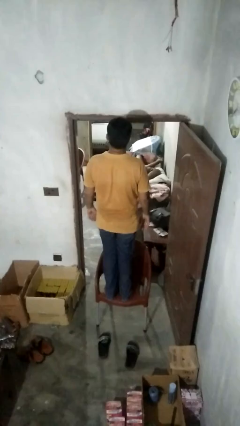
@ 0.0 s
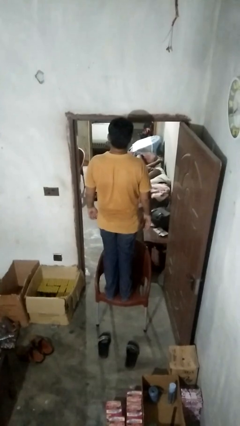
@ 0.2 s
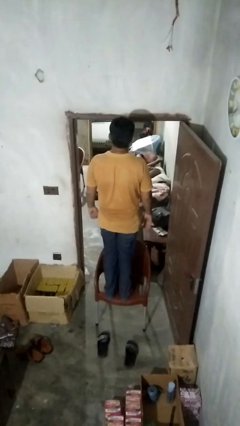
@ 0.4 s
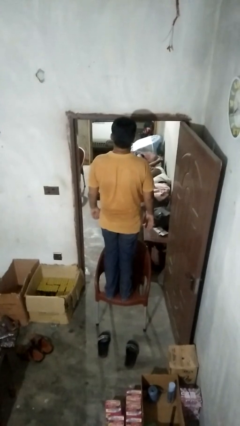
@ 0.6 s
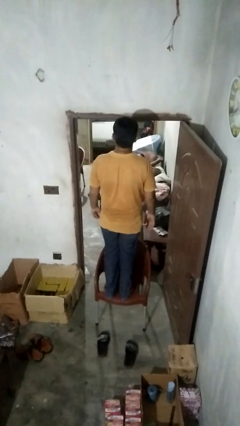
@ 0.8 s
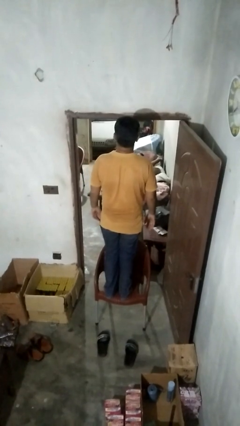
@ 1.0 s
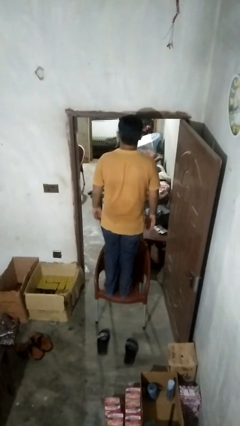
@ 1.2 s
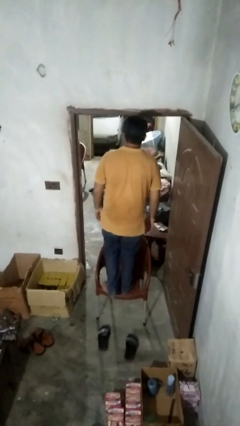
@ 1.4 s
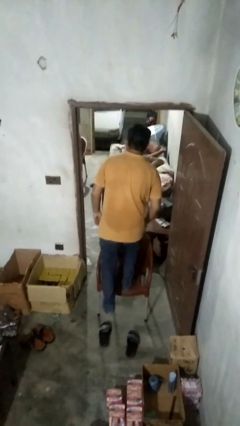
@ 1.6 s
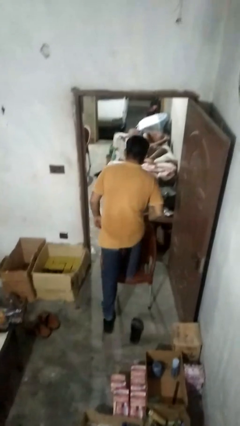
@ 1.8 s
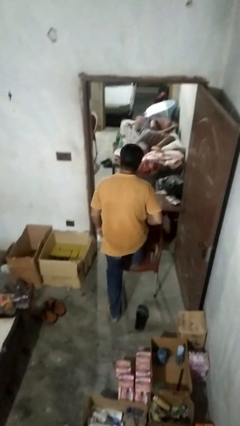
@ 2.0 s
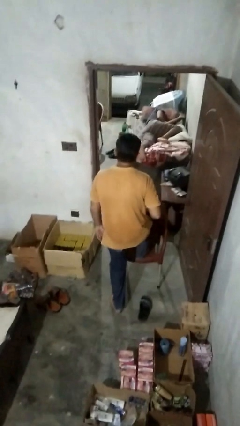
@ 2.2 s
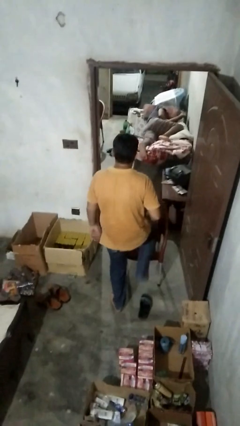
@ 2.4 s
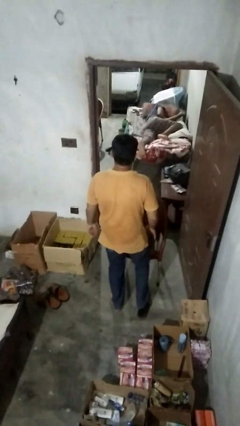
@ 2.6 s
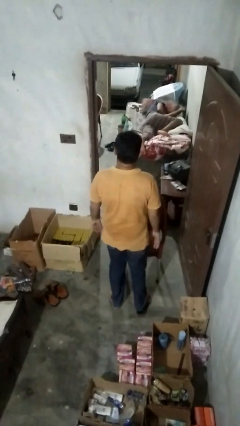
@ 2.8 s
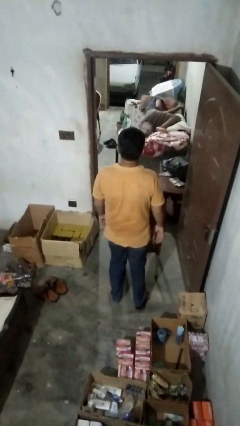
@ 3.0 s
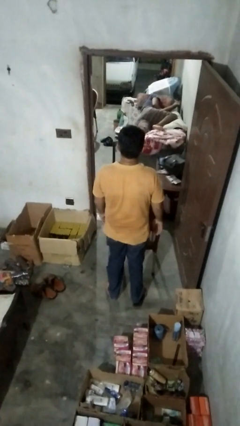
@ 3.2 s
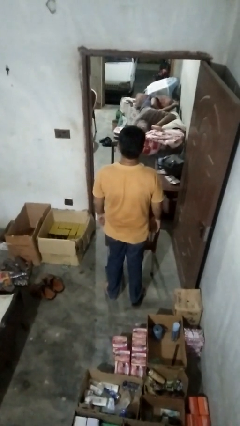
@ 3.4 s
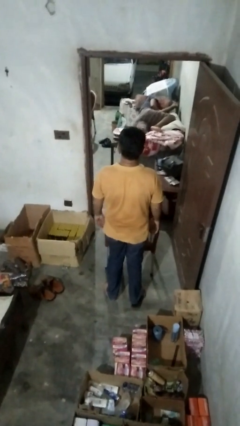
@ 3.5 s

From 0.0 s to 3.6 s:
person climbs off chair

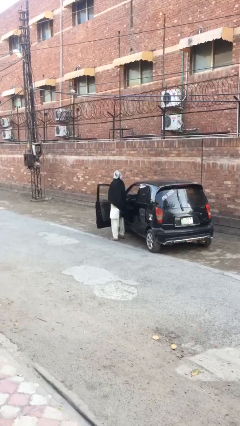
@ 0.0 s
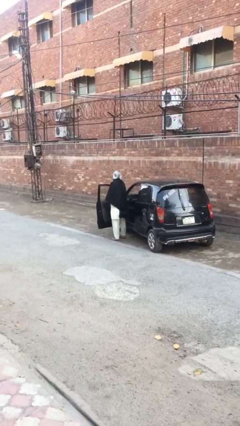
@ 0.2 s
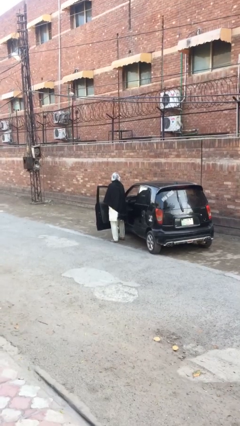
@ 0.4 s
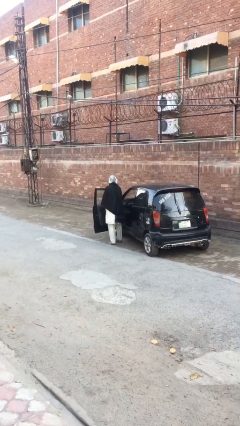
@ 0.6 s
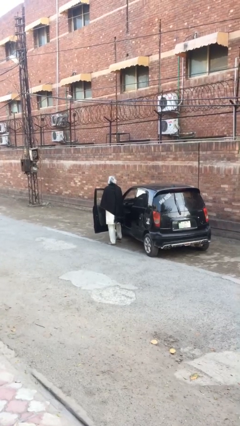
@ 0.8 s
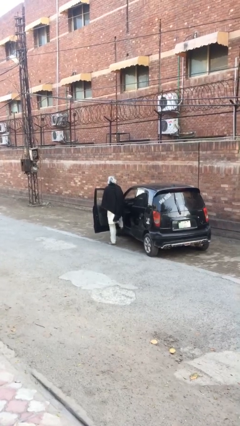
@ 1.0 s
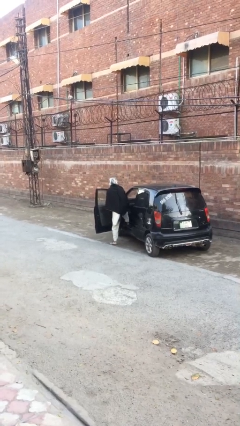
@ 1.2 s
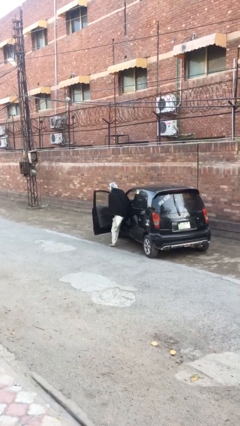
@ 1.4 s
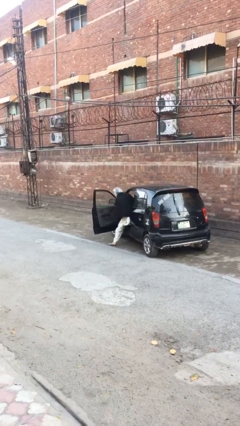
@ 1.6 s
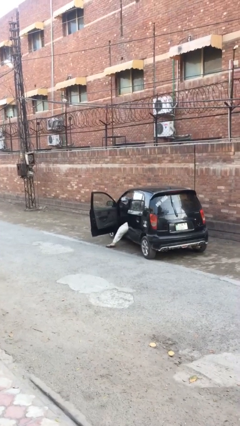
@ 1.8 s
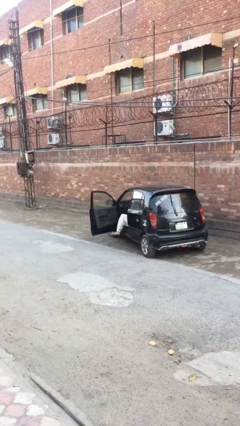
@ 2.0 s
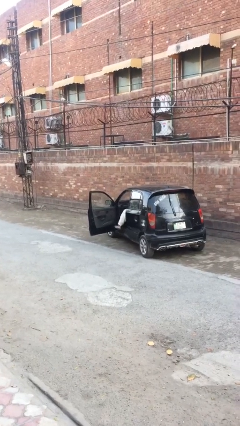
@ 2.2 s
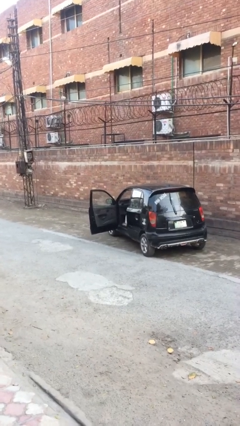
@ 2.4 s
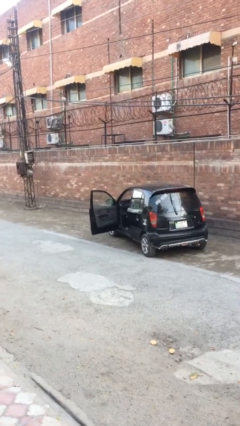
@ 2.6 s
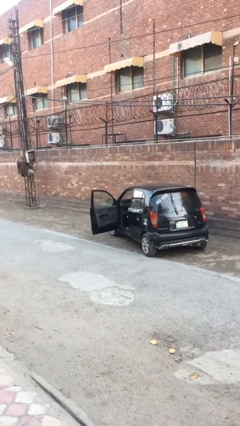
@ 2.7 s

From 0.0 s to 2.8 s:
person enters car

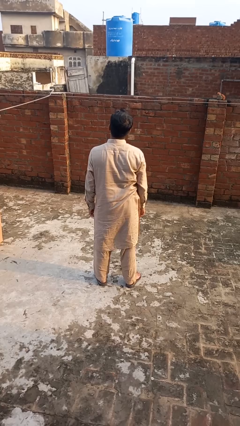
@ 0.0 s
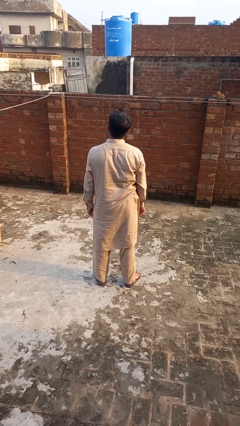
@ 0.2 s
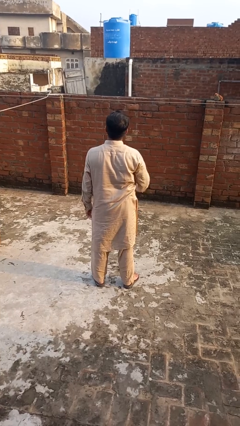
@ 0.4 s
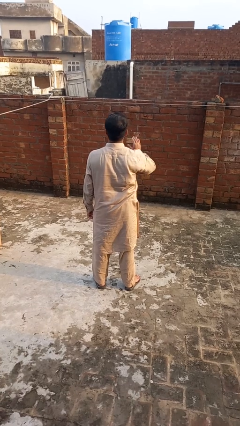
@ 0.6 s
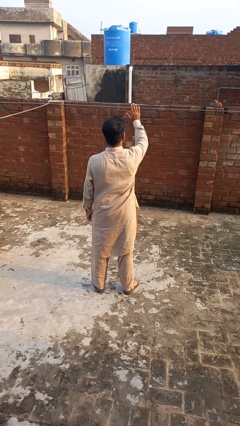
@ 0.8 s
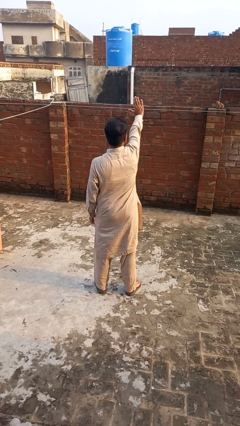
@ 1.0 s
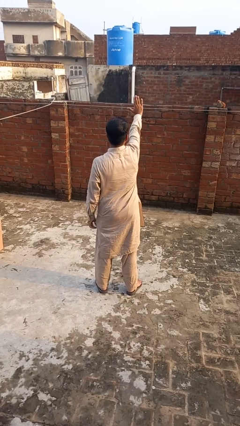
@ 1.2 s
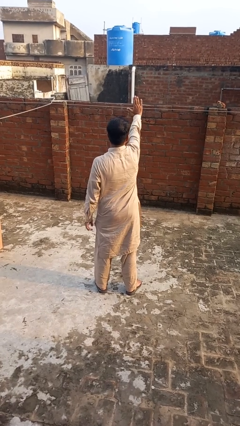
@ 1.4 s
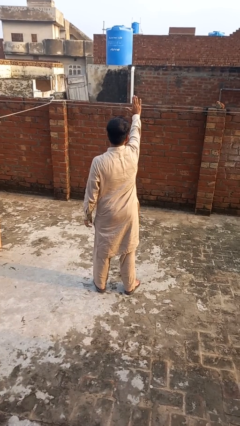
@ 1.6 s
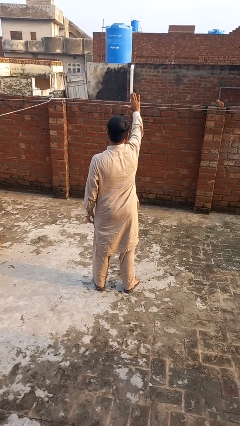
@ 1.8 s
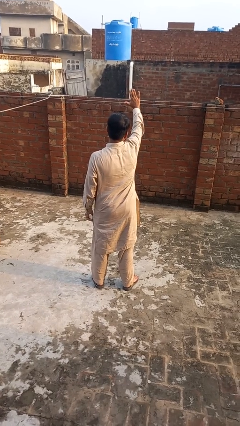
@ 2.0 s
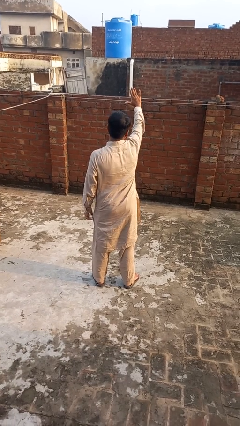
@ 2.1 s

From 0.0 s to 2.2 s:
person gestures stop

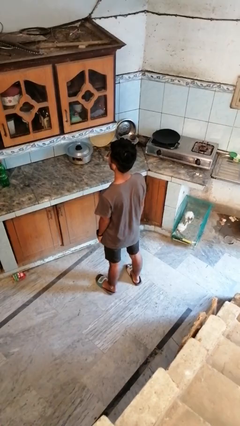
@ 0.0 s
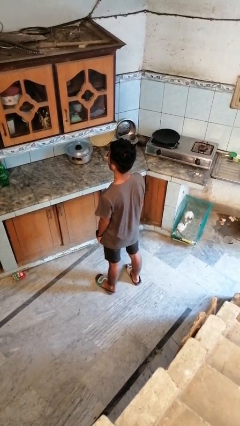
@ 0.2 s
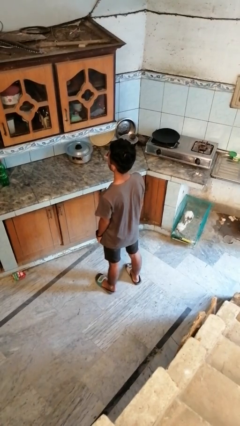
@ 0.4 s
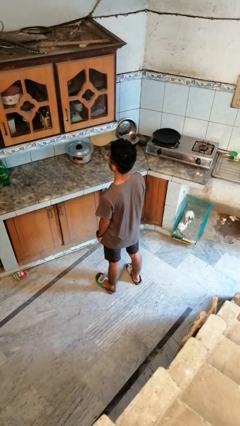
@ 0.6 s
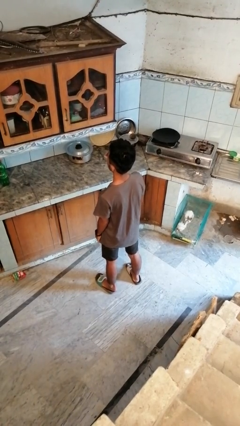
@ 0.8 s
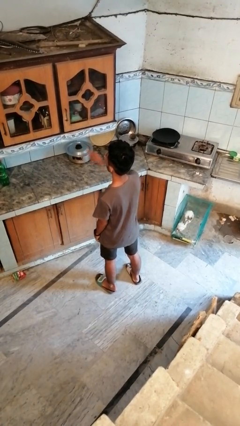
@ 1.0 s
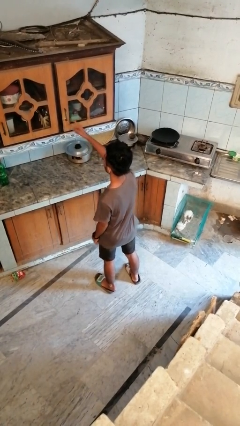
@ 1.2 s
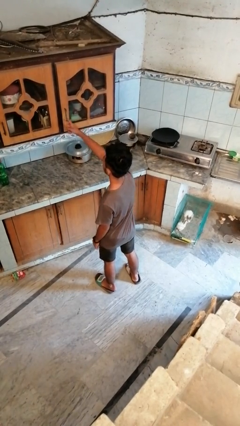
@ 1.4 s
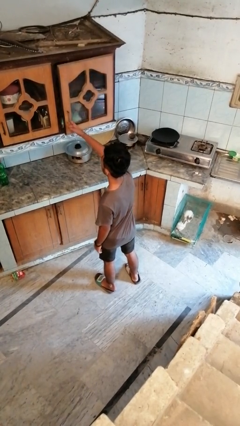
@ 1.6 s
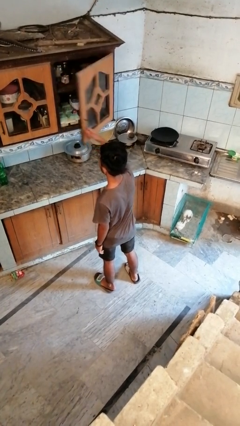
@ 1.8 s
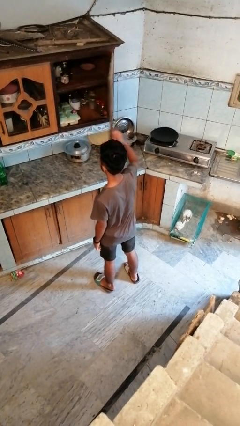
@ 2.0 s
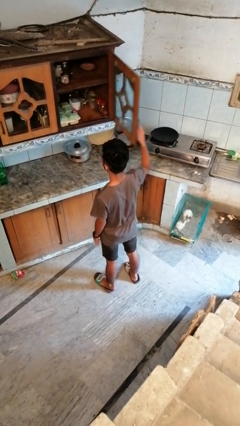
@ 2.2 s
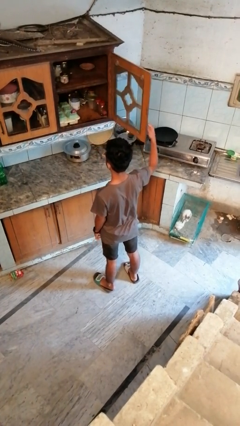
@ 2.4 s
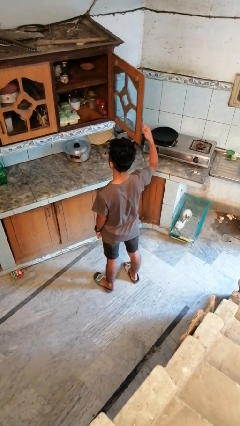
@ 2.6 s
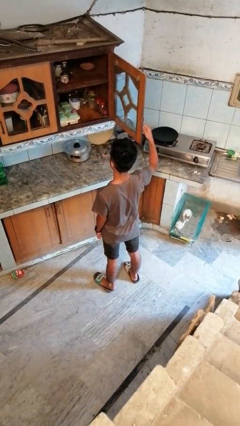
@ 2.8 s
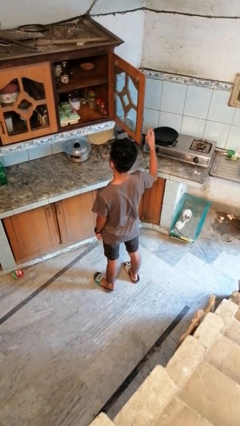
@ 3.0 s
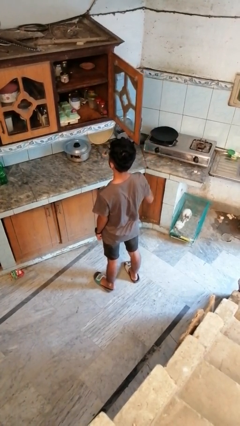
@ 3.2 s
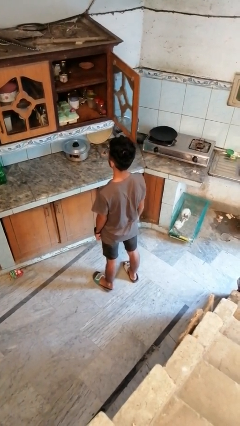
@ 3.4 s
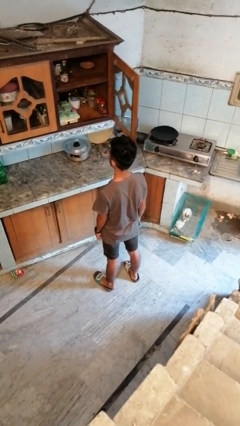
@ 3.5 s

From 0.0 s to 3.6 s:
person opens cabinet

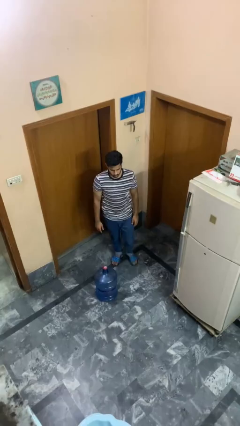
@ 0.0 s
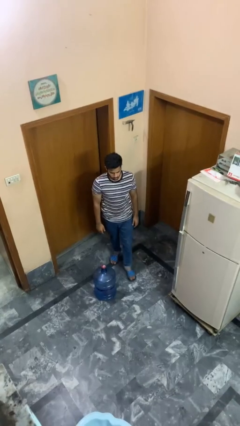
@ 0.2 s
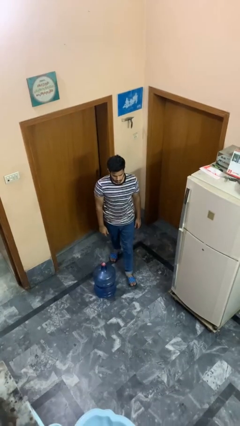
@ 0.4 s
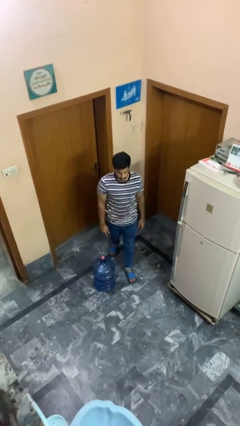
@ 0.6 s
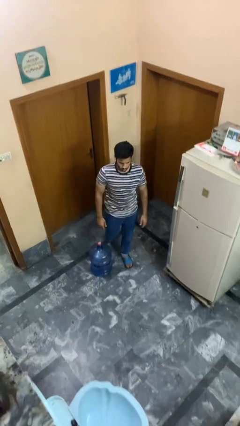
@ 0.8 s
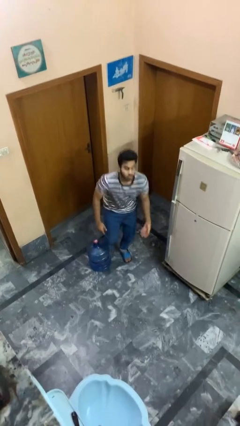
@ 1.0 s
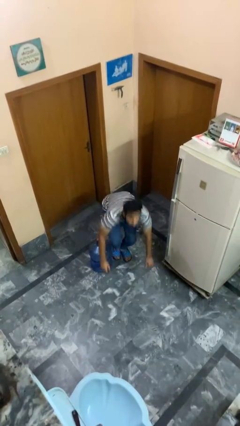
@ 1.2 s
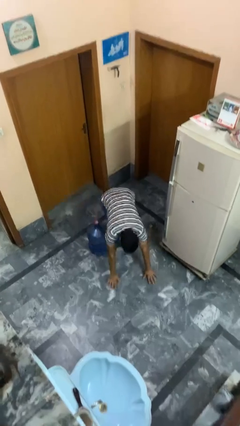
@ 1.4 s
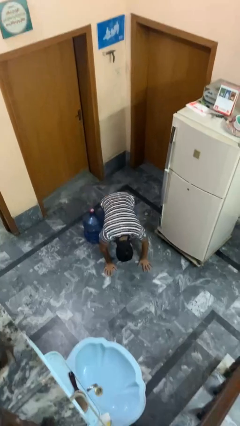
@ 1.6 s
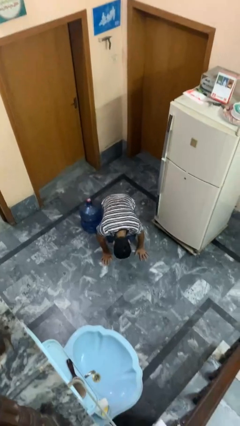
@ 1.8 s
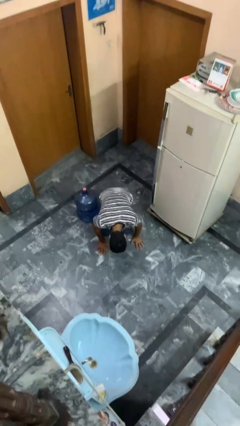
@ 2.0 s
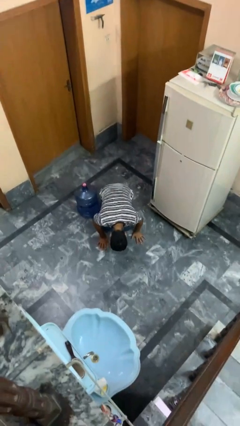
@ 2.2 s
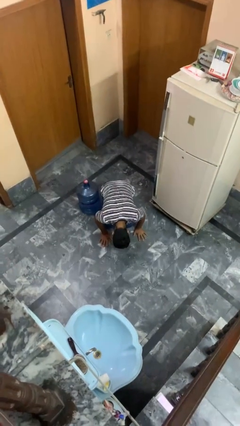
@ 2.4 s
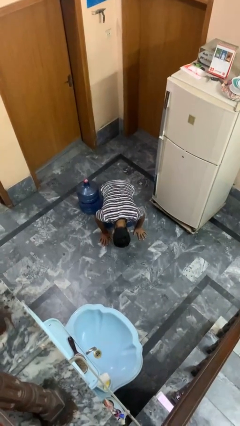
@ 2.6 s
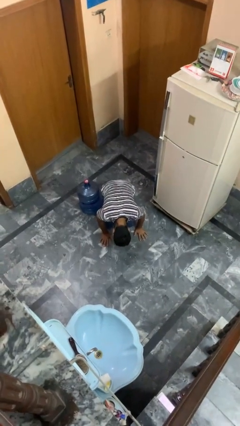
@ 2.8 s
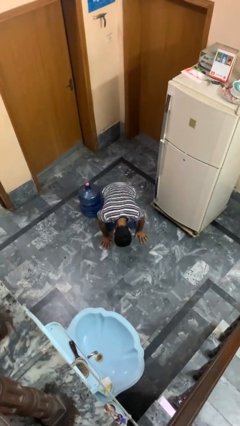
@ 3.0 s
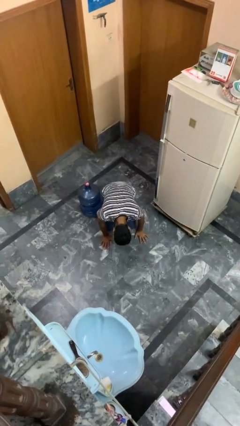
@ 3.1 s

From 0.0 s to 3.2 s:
person trips on object on floor

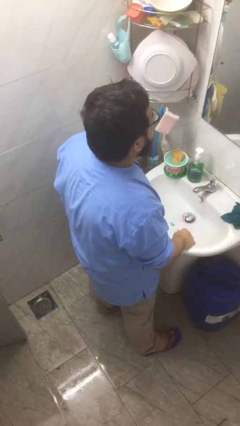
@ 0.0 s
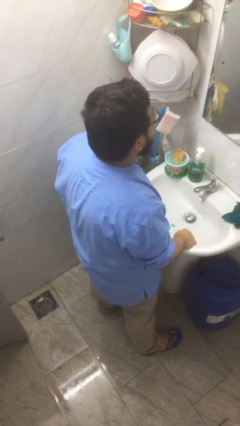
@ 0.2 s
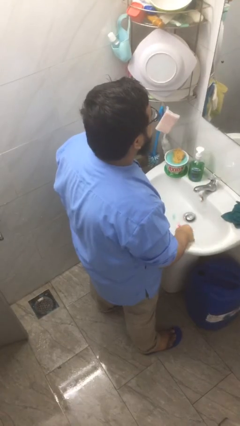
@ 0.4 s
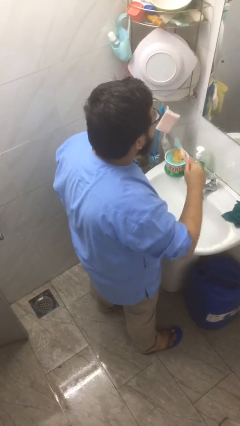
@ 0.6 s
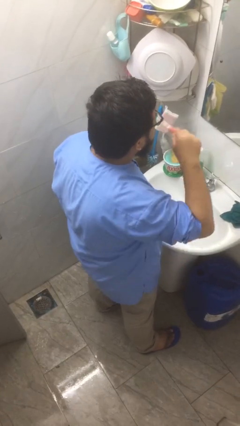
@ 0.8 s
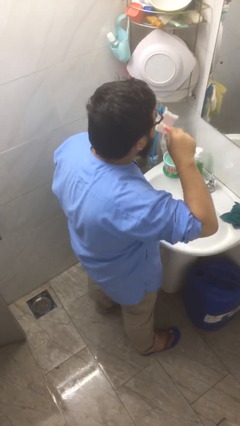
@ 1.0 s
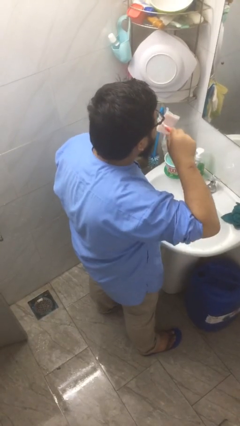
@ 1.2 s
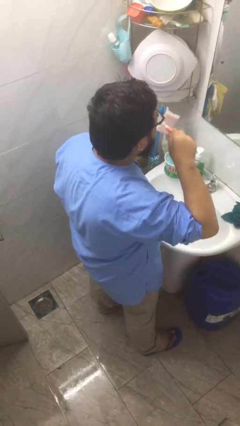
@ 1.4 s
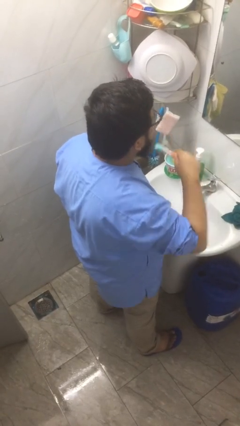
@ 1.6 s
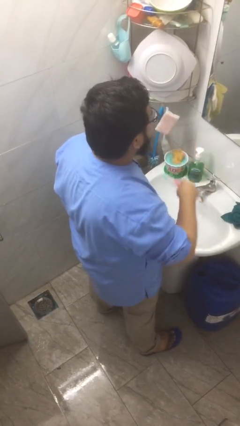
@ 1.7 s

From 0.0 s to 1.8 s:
person brushes teeth

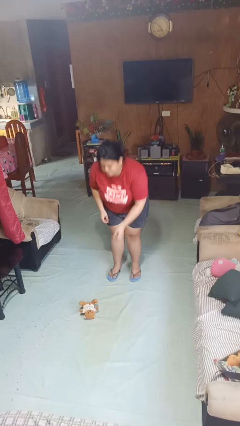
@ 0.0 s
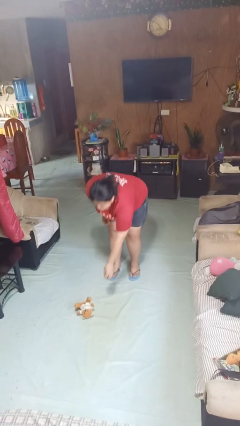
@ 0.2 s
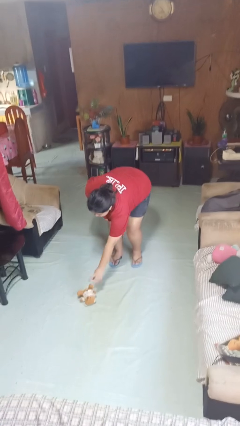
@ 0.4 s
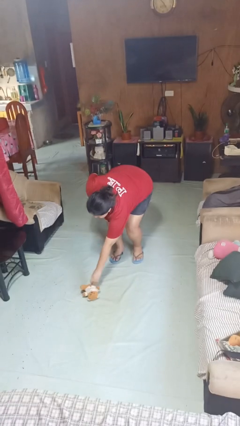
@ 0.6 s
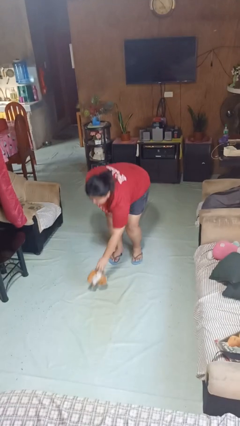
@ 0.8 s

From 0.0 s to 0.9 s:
person picks up object from floor
